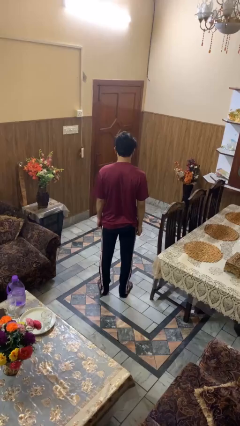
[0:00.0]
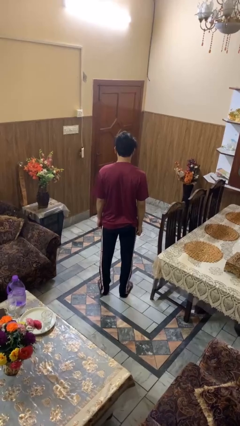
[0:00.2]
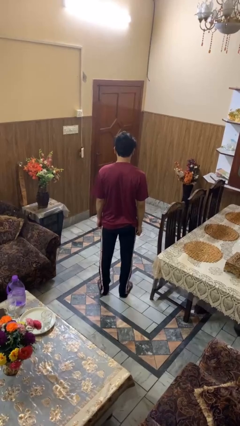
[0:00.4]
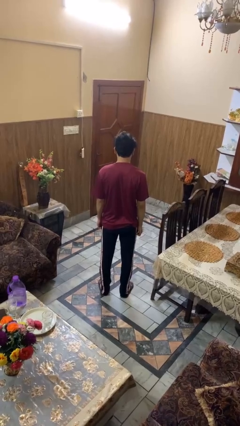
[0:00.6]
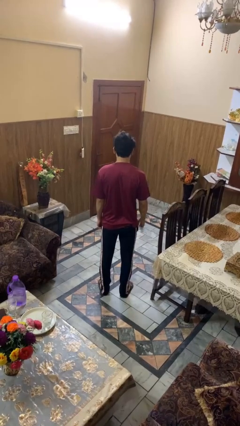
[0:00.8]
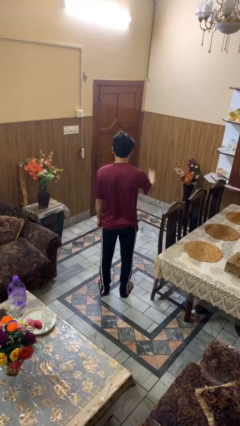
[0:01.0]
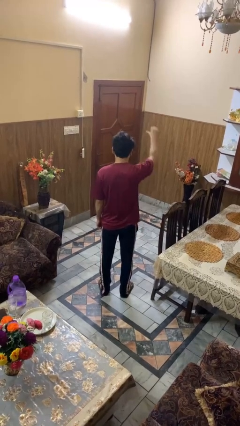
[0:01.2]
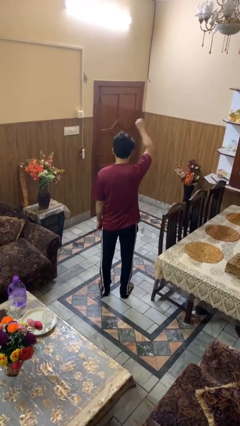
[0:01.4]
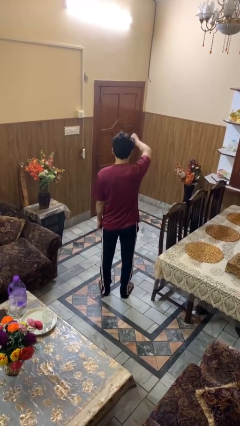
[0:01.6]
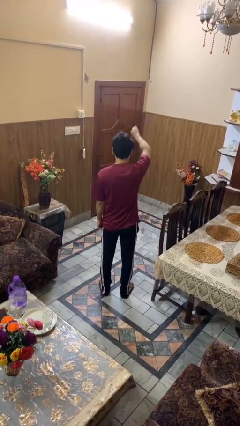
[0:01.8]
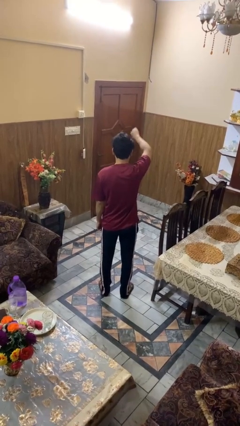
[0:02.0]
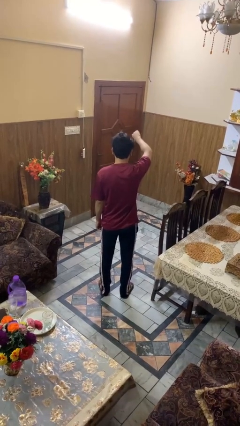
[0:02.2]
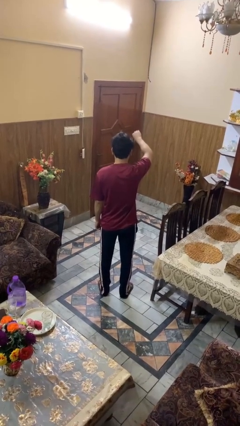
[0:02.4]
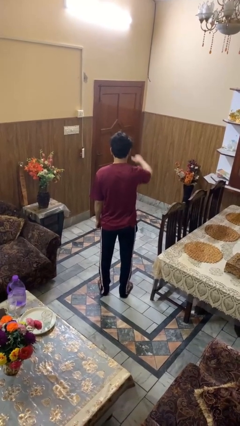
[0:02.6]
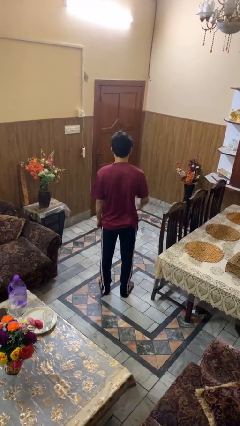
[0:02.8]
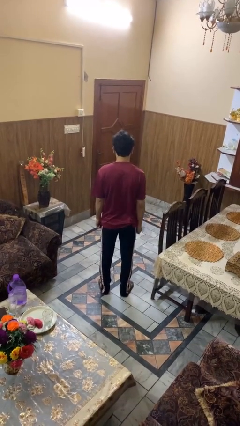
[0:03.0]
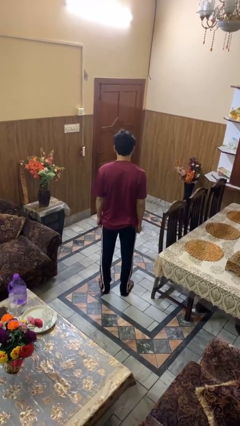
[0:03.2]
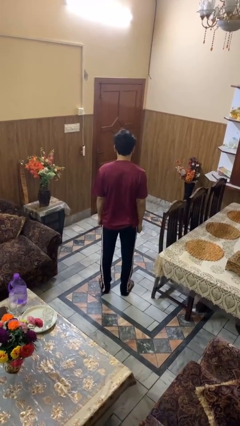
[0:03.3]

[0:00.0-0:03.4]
person gestures thumbs down

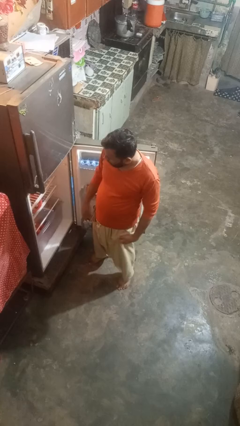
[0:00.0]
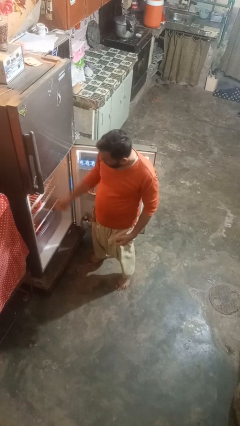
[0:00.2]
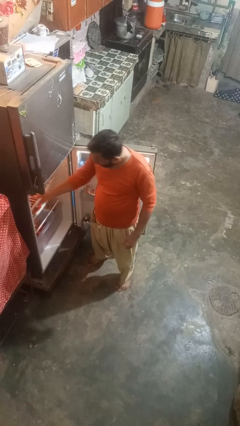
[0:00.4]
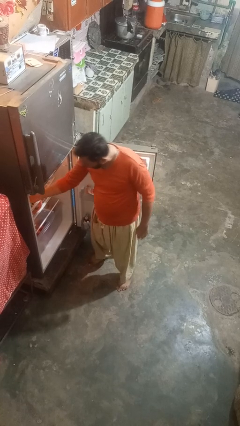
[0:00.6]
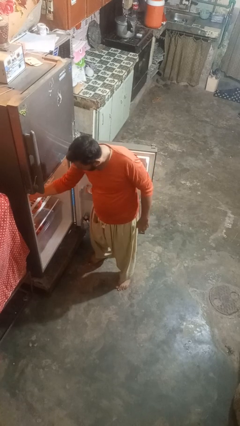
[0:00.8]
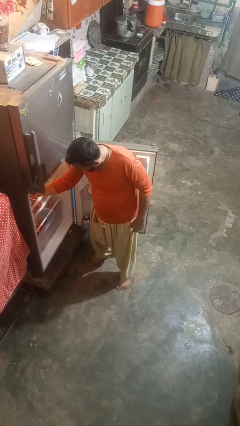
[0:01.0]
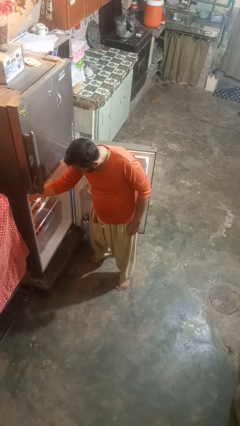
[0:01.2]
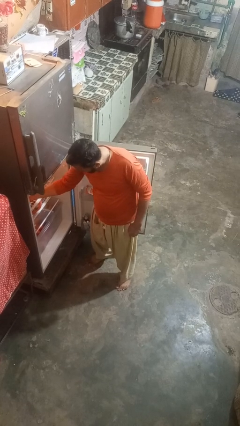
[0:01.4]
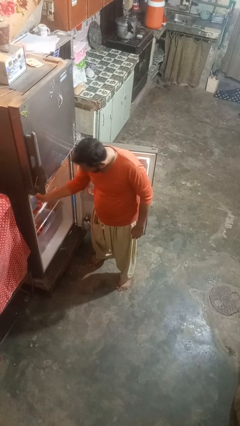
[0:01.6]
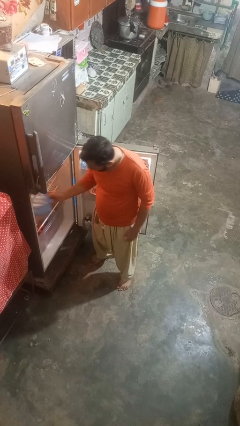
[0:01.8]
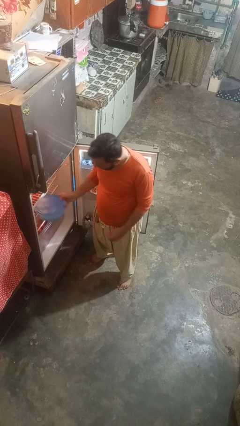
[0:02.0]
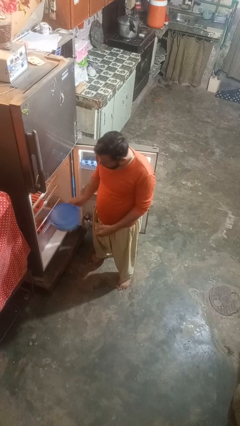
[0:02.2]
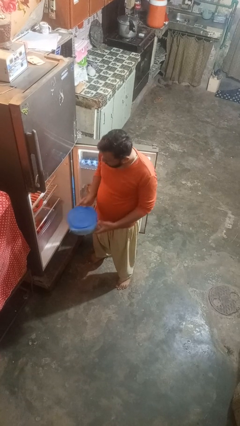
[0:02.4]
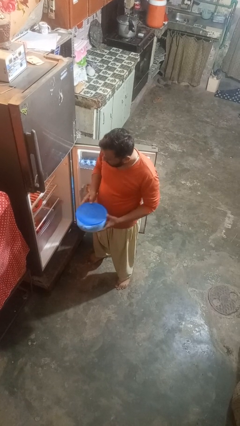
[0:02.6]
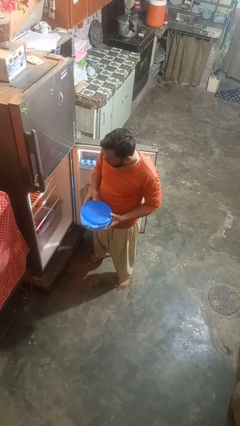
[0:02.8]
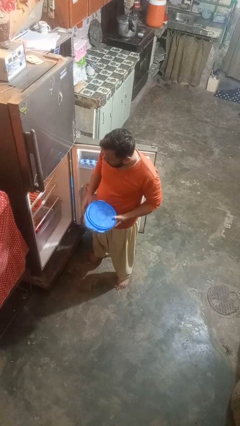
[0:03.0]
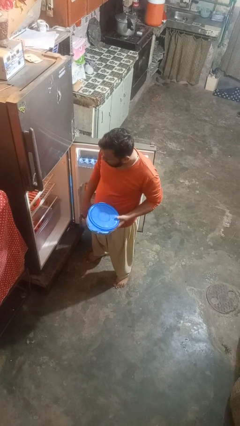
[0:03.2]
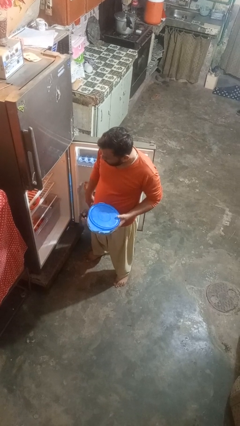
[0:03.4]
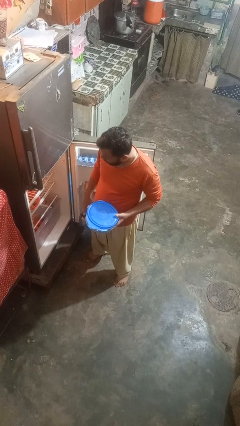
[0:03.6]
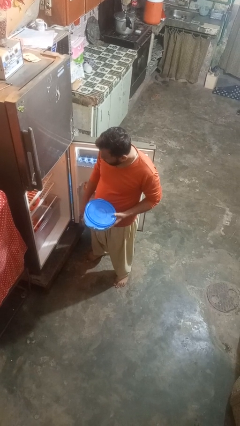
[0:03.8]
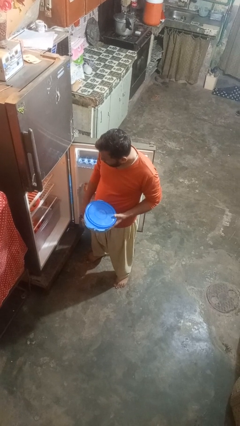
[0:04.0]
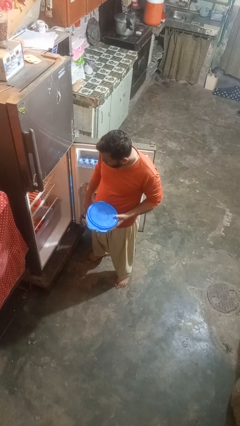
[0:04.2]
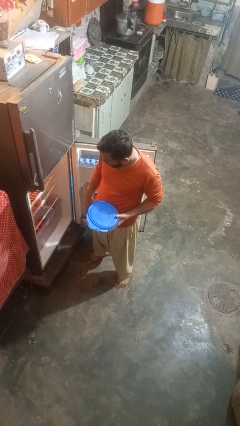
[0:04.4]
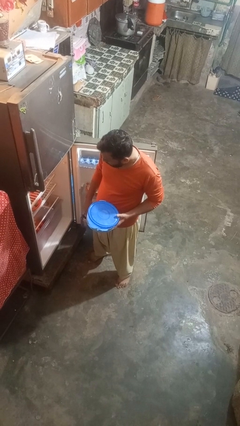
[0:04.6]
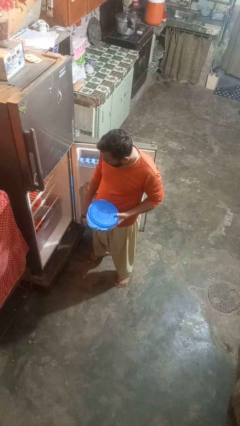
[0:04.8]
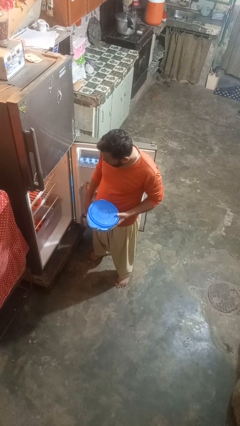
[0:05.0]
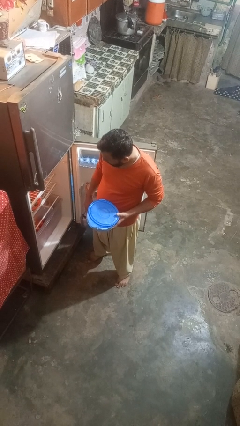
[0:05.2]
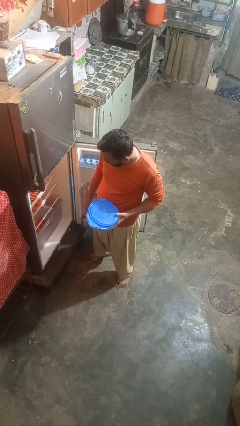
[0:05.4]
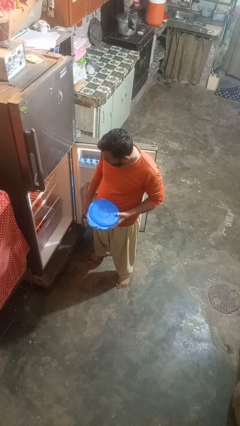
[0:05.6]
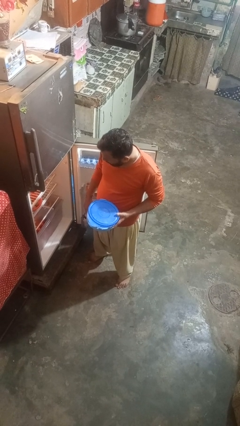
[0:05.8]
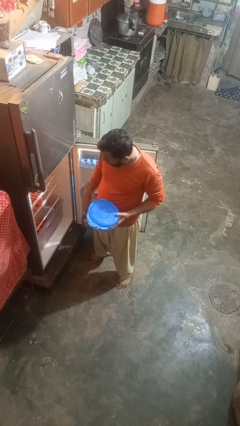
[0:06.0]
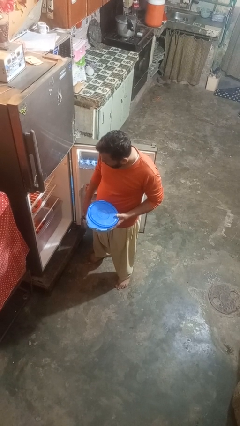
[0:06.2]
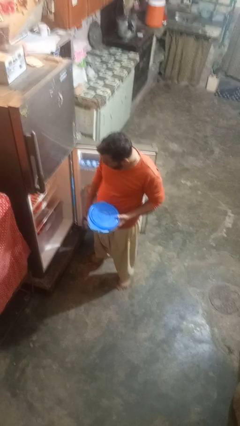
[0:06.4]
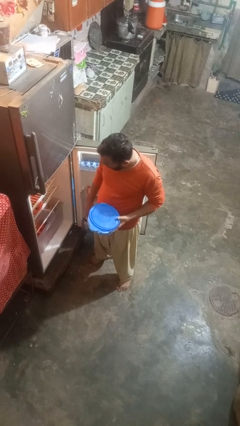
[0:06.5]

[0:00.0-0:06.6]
person takes object from refrigerator

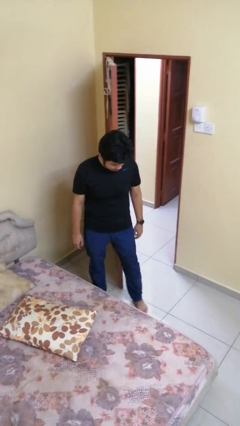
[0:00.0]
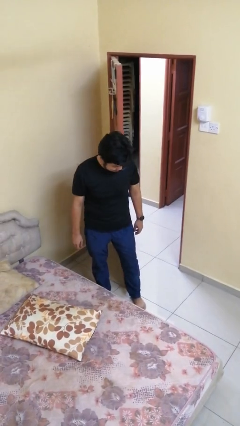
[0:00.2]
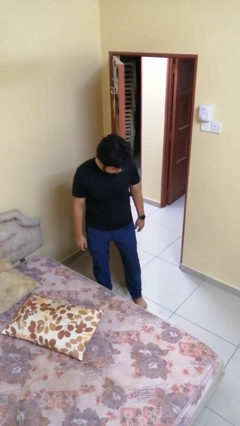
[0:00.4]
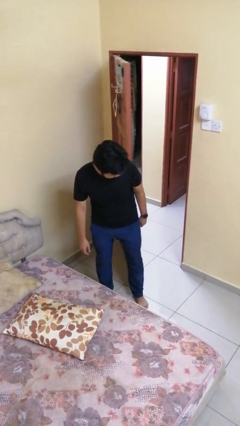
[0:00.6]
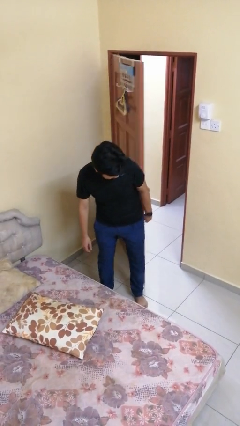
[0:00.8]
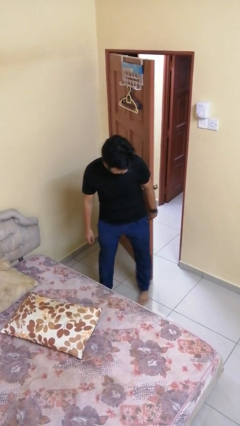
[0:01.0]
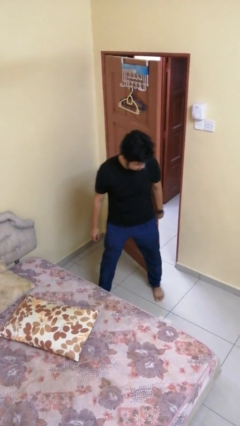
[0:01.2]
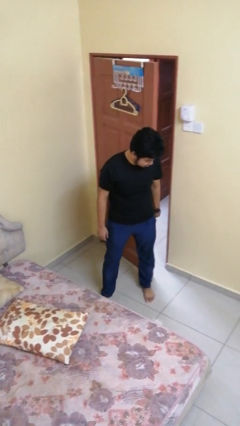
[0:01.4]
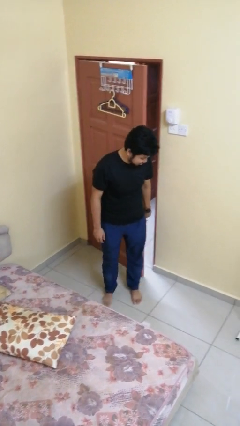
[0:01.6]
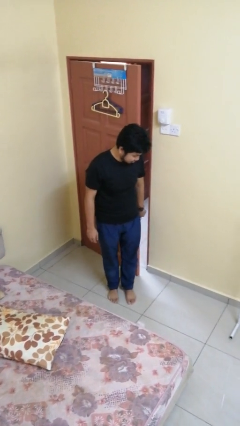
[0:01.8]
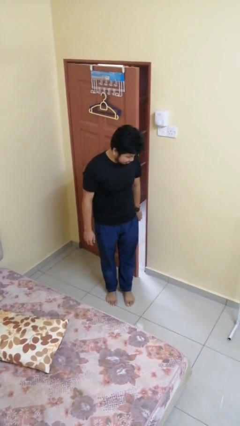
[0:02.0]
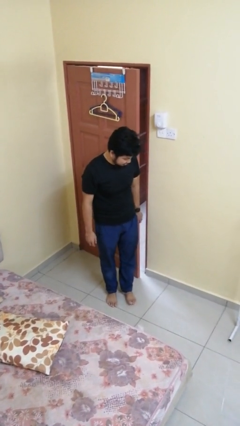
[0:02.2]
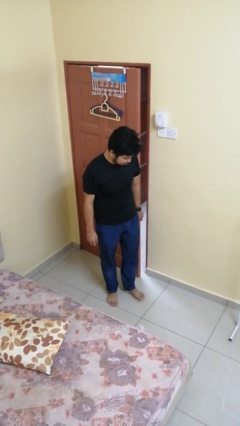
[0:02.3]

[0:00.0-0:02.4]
person closes door with hip

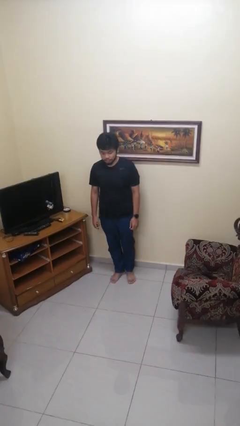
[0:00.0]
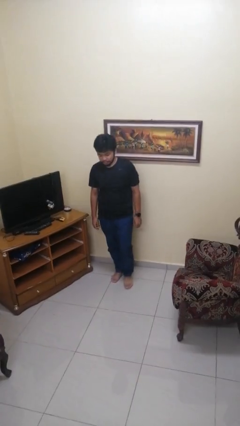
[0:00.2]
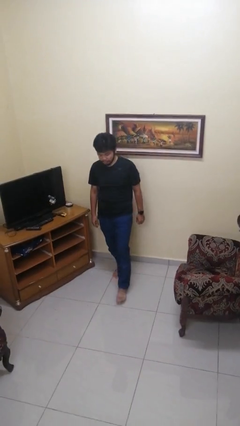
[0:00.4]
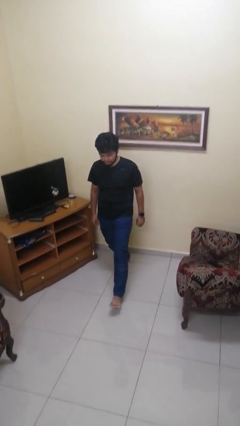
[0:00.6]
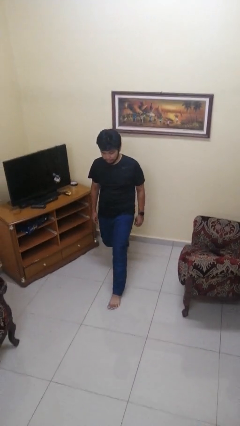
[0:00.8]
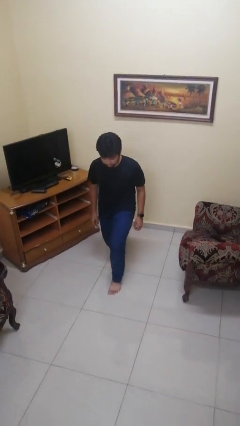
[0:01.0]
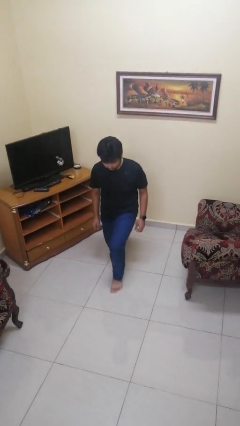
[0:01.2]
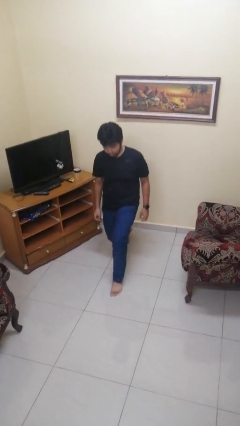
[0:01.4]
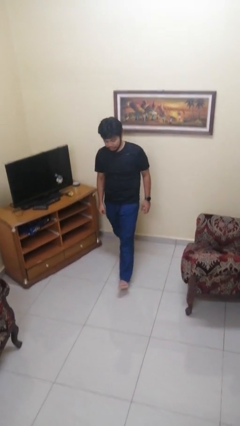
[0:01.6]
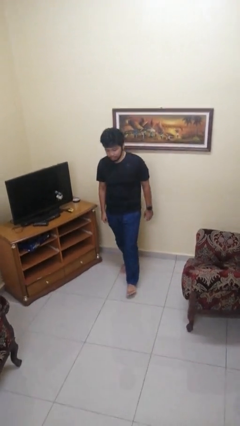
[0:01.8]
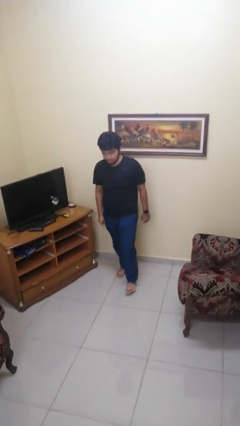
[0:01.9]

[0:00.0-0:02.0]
person exercises with lunges

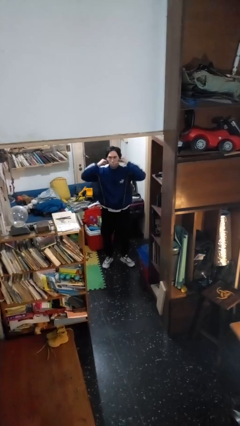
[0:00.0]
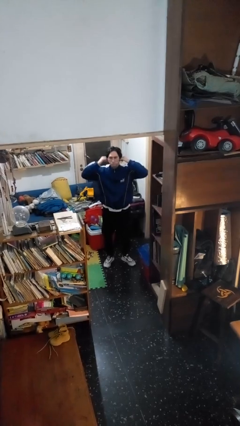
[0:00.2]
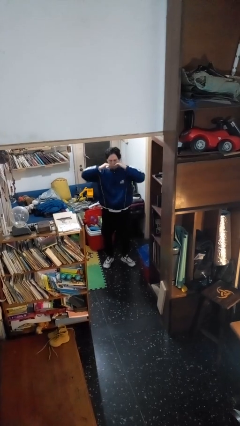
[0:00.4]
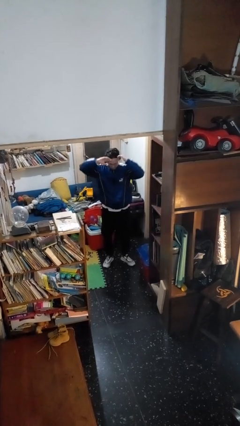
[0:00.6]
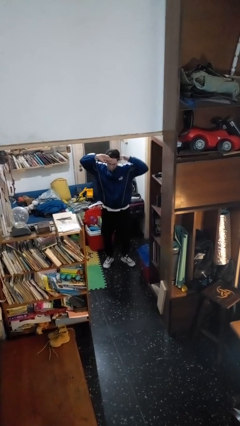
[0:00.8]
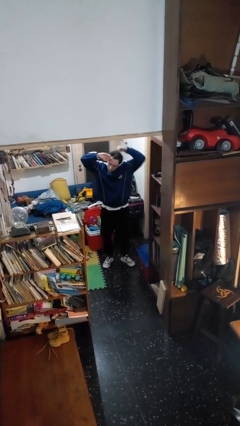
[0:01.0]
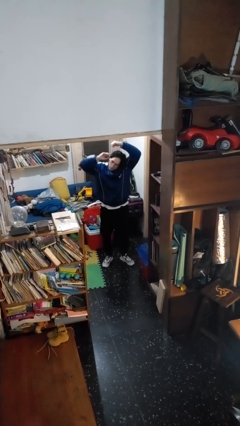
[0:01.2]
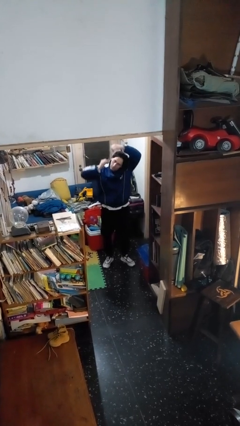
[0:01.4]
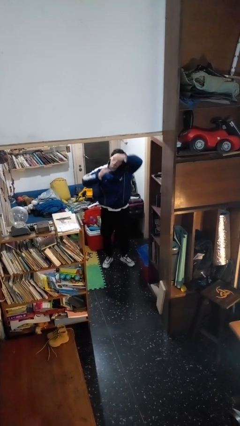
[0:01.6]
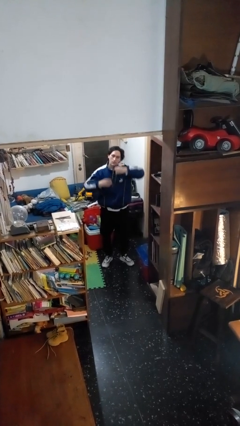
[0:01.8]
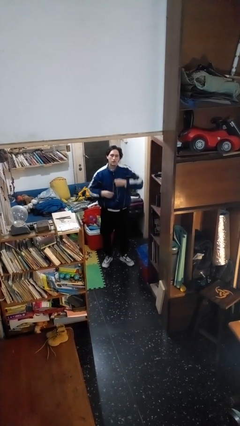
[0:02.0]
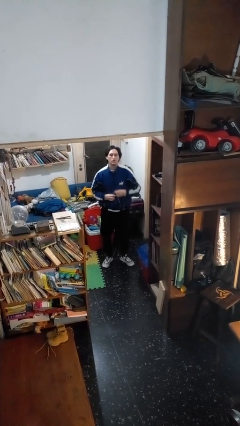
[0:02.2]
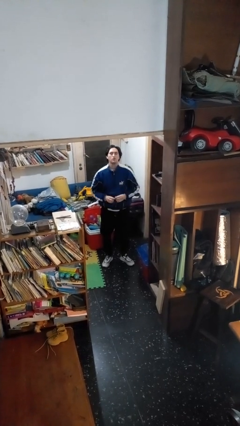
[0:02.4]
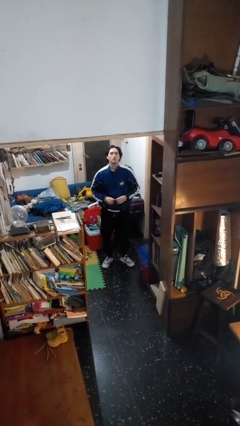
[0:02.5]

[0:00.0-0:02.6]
person takes off necklace

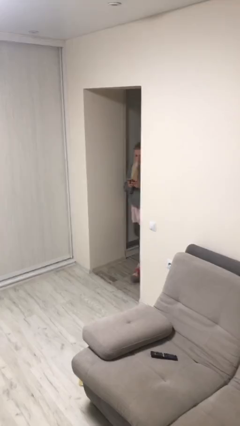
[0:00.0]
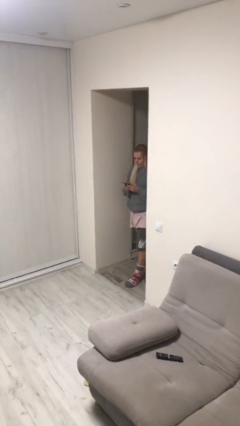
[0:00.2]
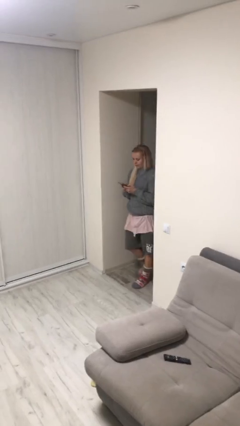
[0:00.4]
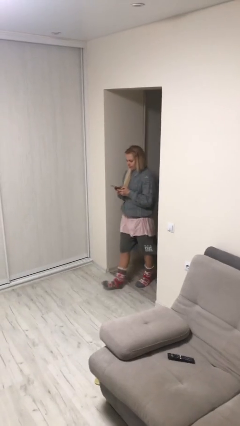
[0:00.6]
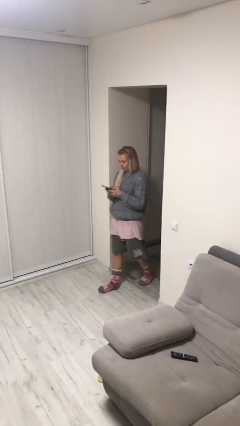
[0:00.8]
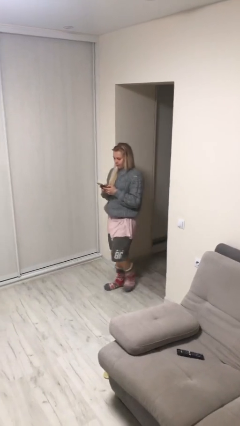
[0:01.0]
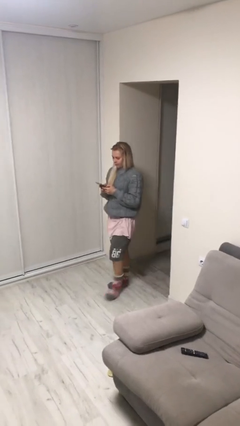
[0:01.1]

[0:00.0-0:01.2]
person enters scene through structure
